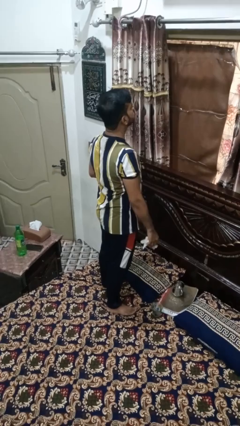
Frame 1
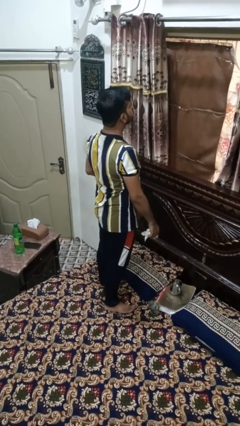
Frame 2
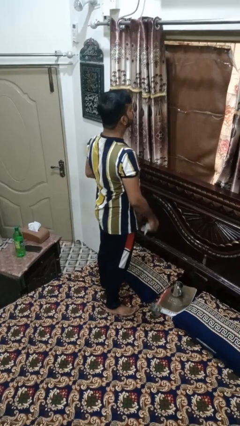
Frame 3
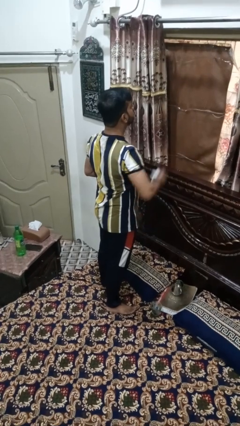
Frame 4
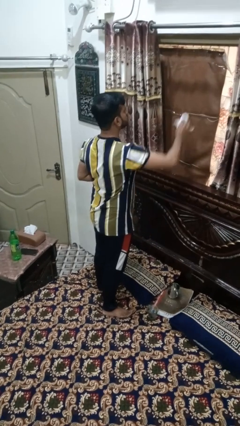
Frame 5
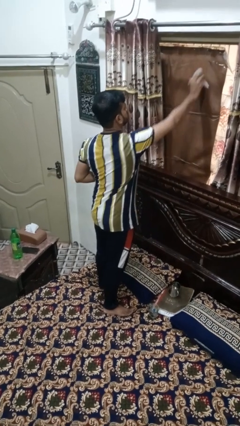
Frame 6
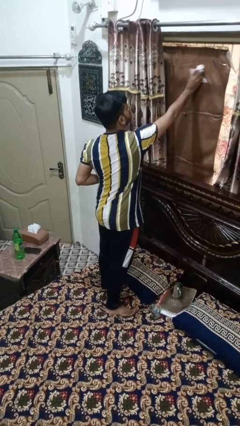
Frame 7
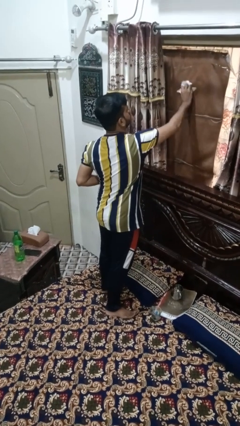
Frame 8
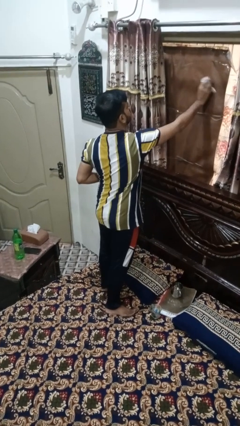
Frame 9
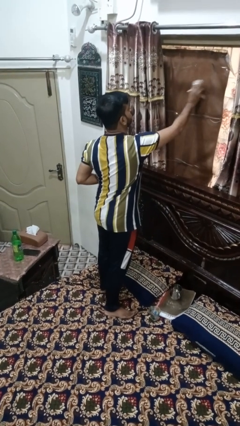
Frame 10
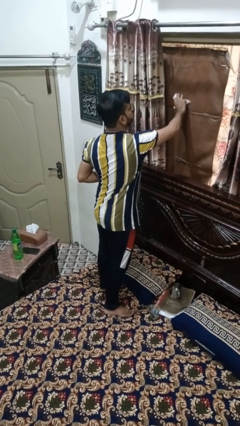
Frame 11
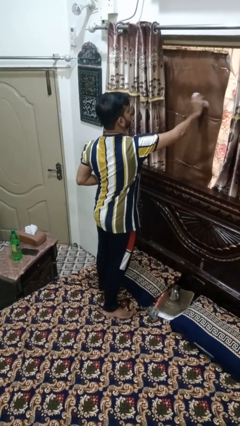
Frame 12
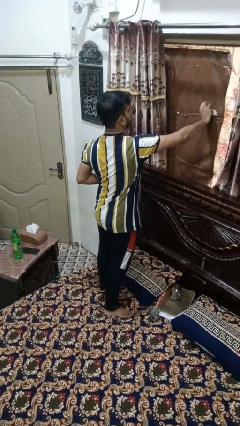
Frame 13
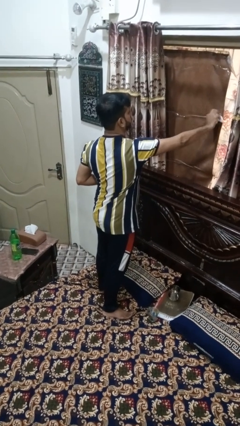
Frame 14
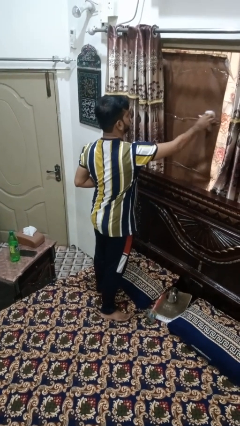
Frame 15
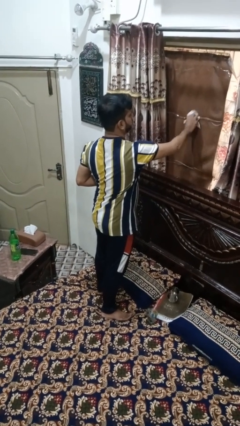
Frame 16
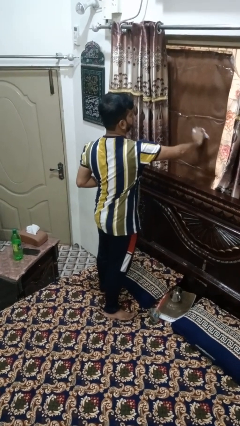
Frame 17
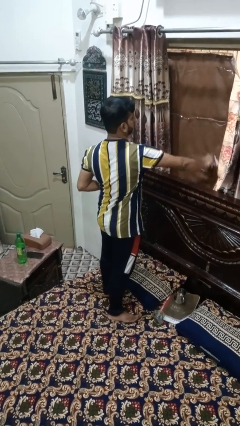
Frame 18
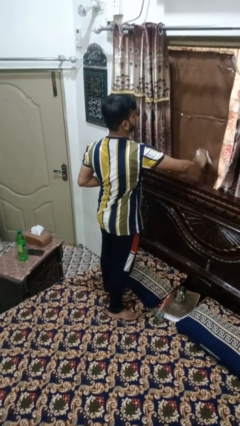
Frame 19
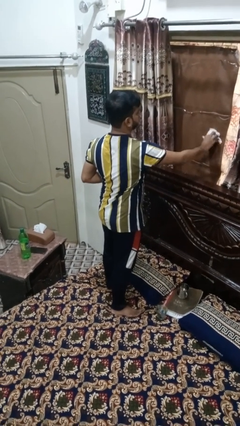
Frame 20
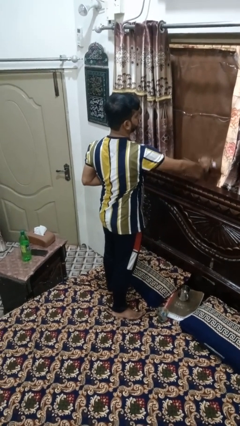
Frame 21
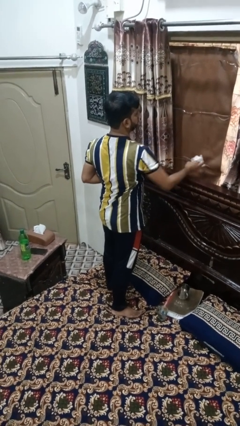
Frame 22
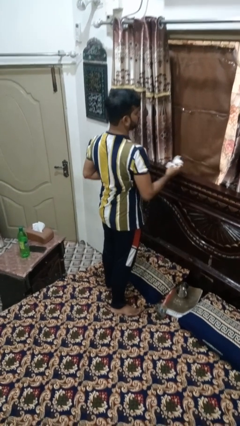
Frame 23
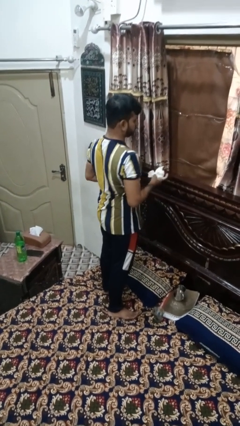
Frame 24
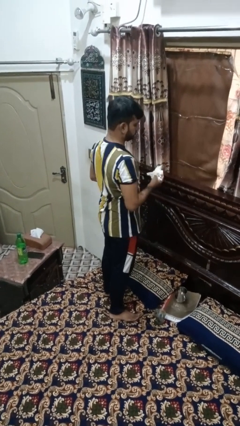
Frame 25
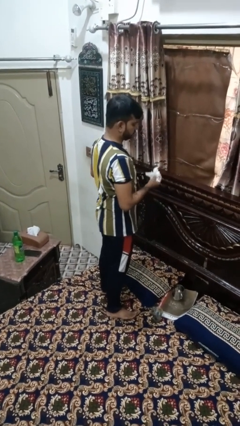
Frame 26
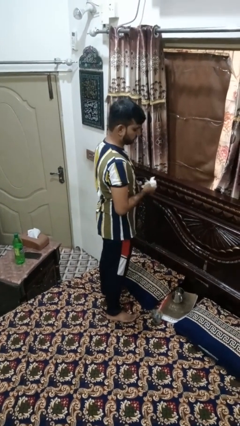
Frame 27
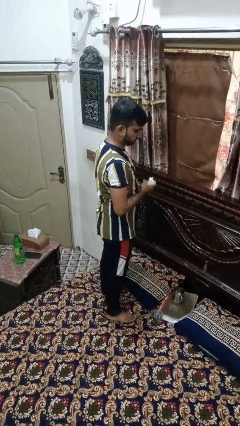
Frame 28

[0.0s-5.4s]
person washes window

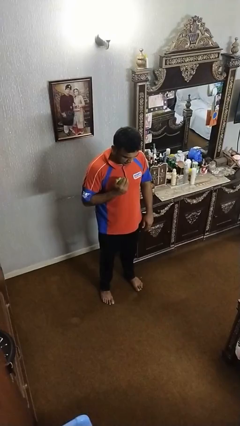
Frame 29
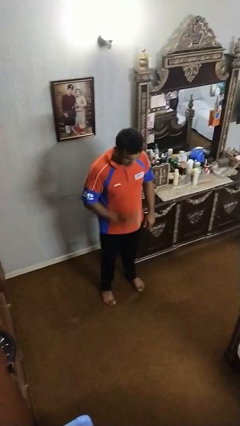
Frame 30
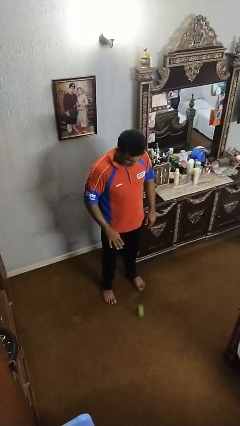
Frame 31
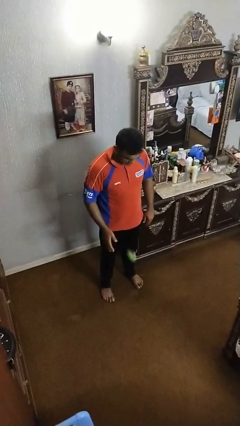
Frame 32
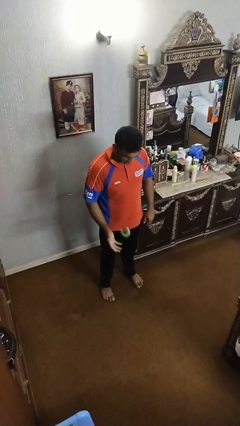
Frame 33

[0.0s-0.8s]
person bounces ball on floor

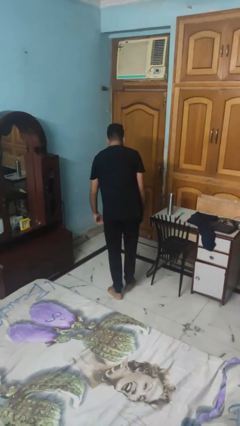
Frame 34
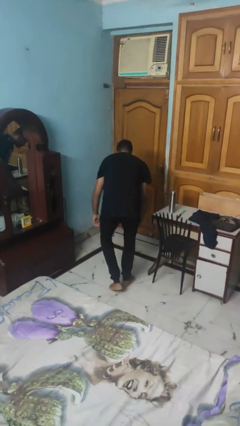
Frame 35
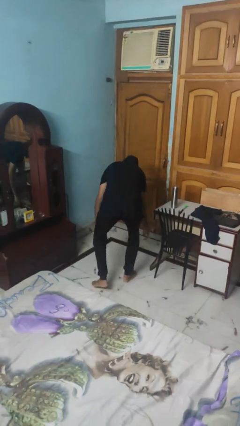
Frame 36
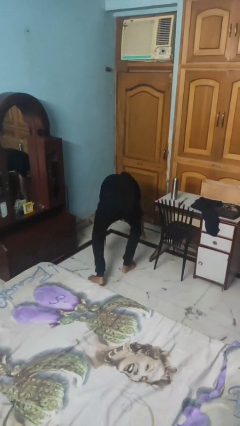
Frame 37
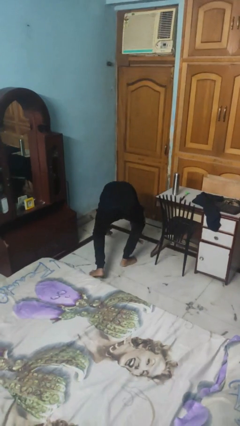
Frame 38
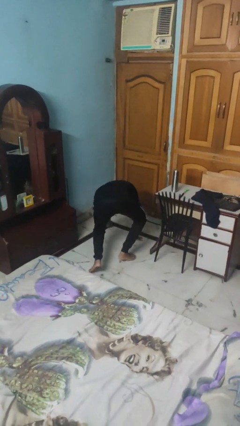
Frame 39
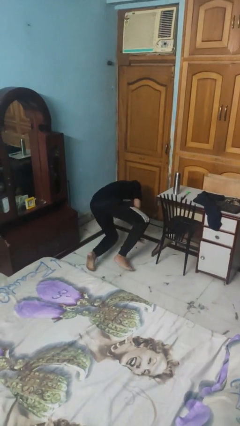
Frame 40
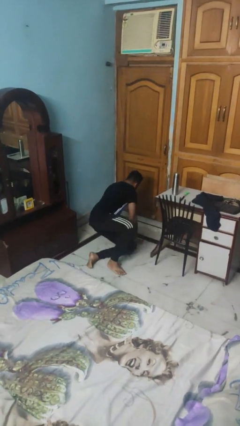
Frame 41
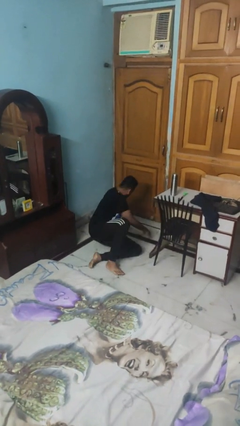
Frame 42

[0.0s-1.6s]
person trips on object on floor

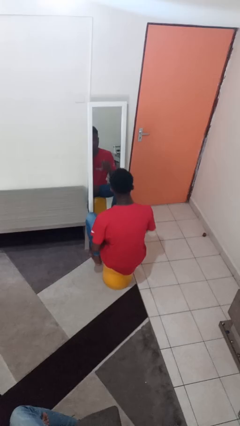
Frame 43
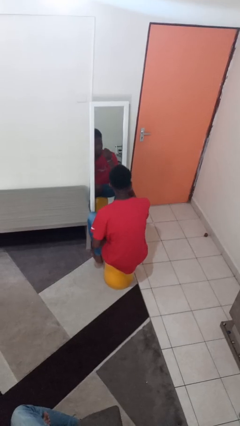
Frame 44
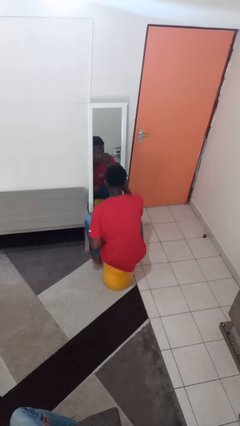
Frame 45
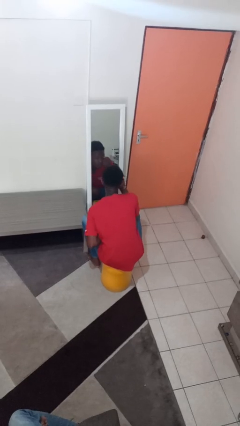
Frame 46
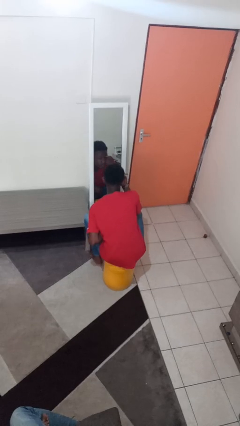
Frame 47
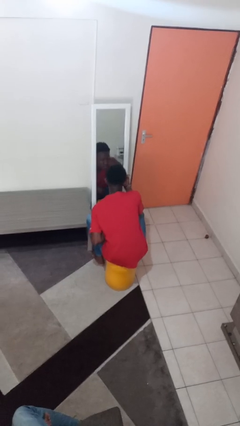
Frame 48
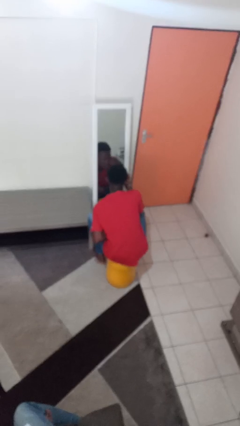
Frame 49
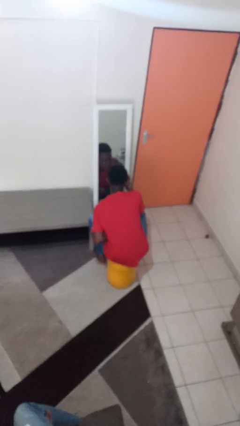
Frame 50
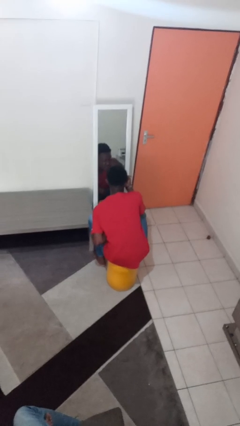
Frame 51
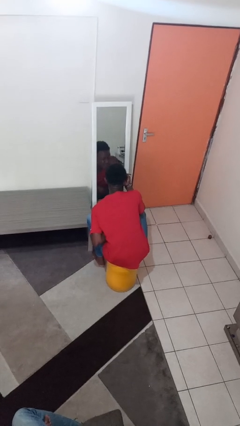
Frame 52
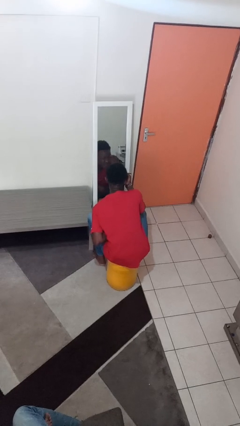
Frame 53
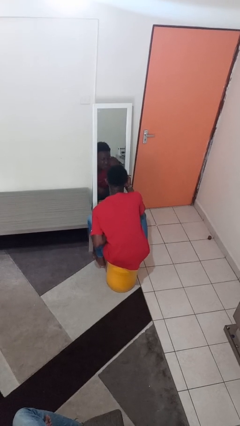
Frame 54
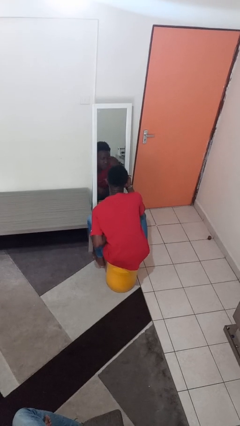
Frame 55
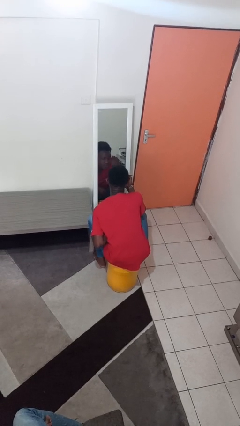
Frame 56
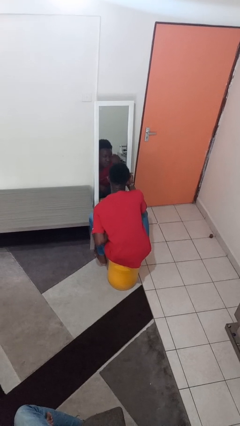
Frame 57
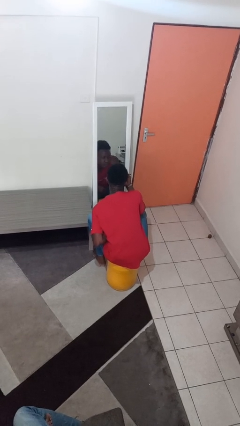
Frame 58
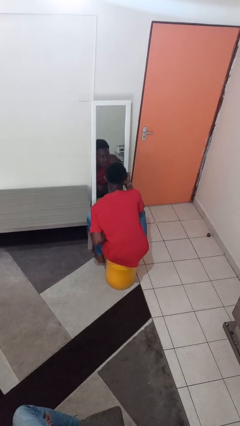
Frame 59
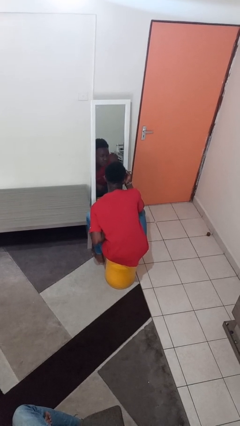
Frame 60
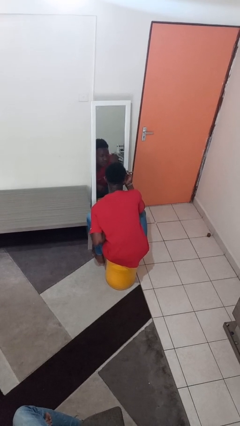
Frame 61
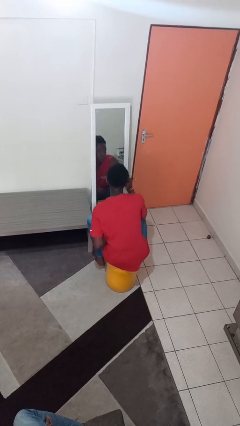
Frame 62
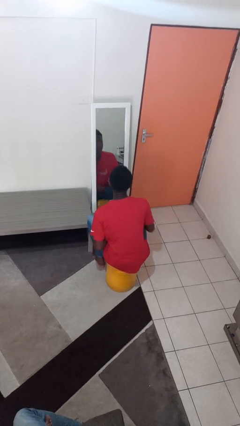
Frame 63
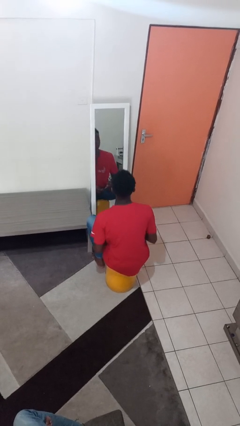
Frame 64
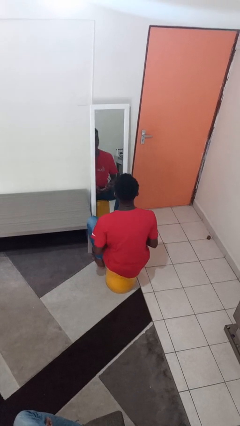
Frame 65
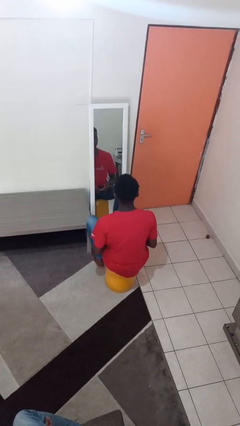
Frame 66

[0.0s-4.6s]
person applies eye makeup

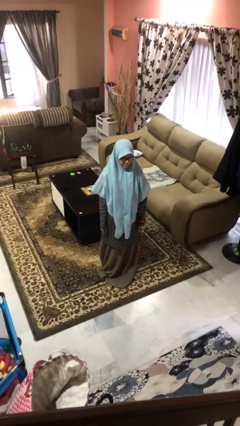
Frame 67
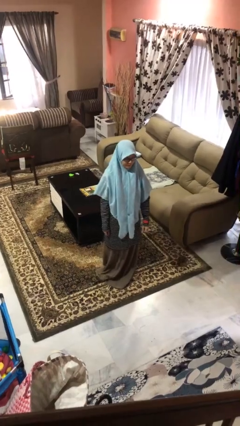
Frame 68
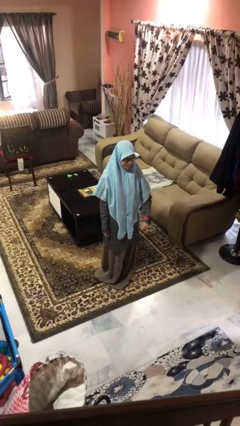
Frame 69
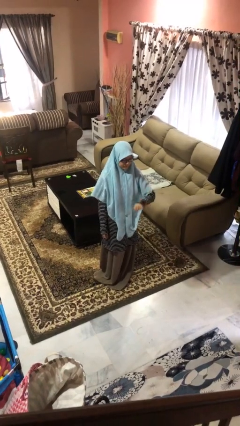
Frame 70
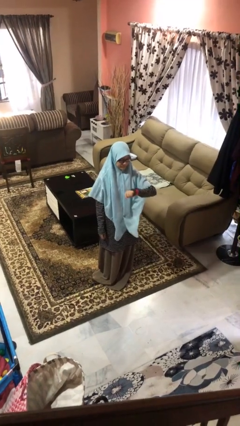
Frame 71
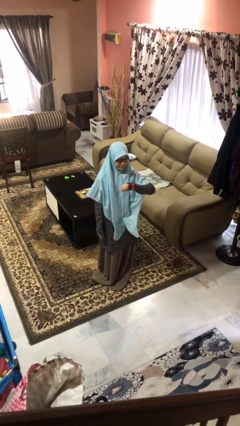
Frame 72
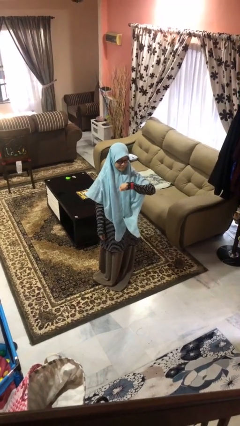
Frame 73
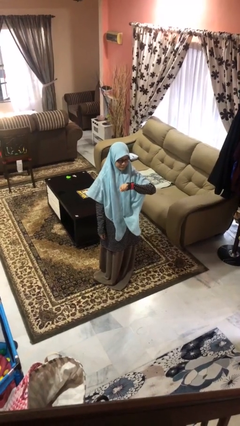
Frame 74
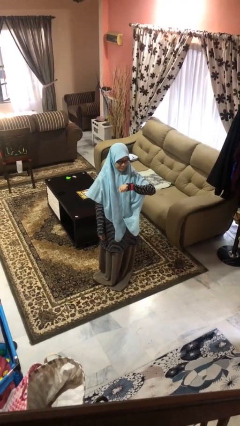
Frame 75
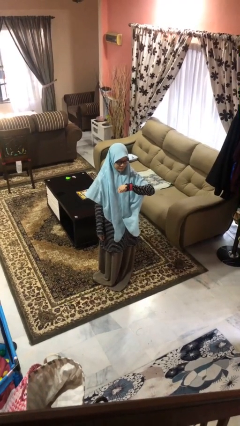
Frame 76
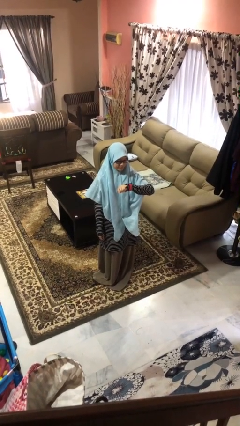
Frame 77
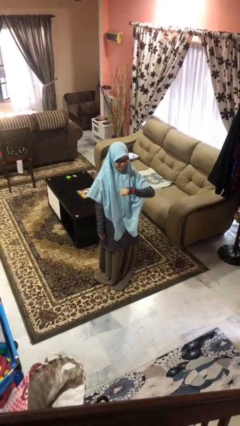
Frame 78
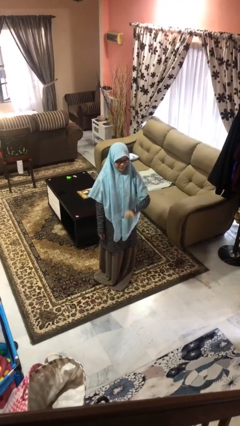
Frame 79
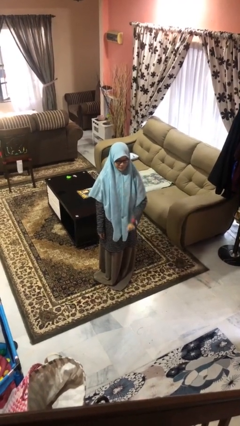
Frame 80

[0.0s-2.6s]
person looks at wristwatch

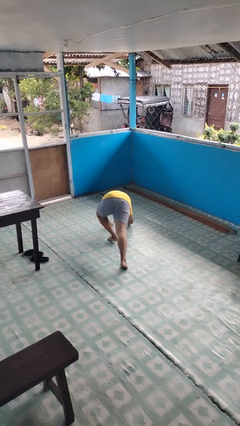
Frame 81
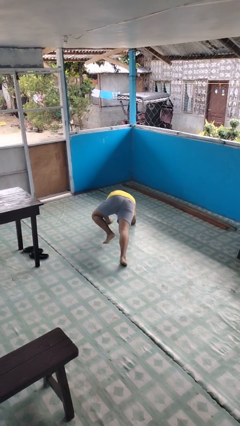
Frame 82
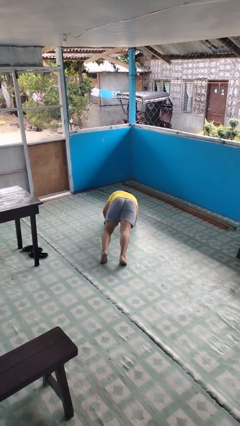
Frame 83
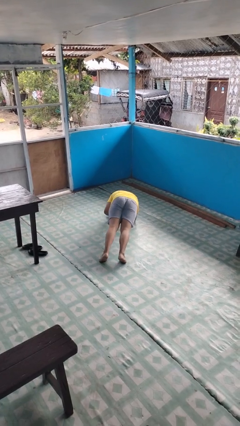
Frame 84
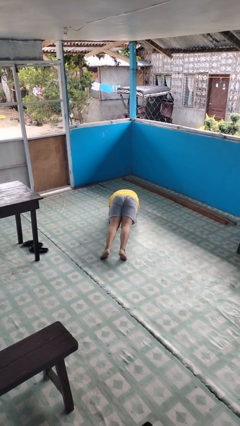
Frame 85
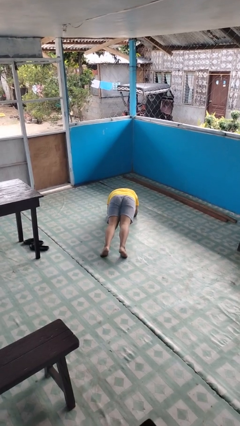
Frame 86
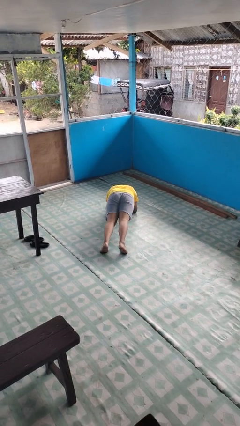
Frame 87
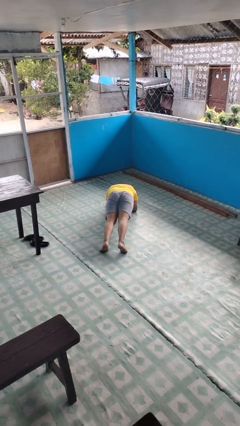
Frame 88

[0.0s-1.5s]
person exercises with plank

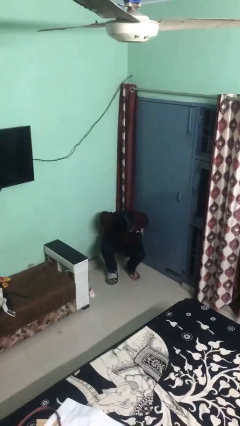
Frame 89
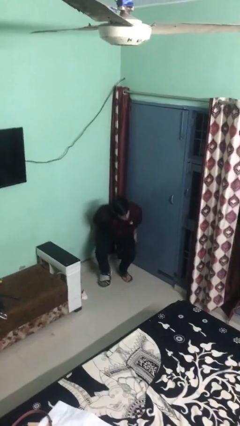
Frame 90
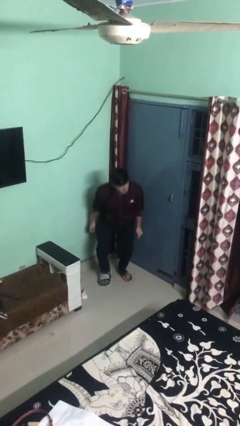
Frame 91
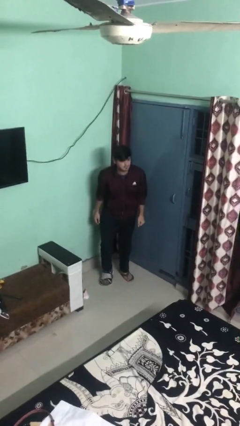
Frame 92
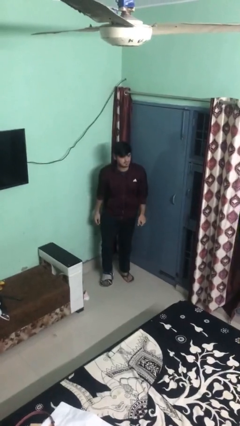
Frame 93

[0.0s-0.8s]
person stands up

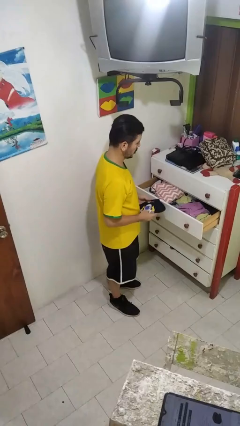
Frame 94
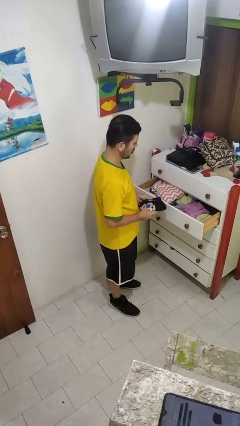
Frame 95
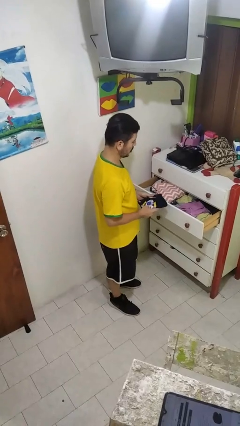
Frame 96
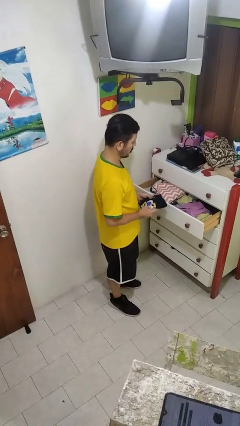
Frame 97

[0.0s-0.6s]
person takes clothes from dresser
